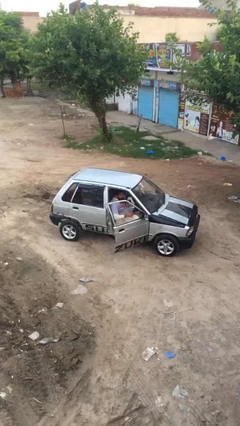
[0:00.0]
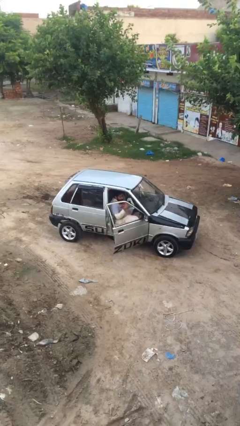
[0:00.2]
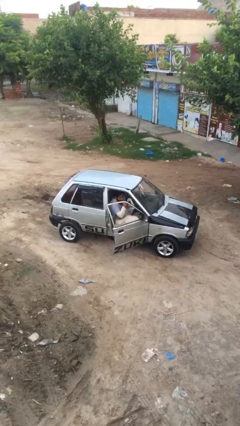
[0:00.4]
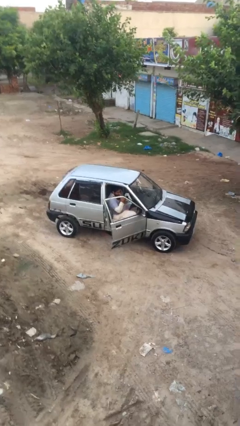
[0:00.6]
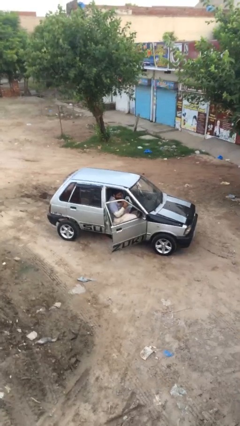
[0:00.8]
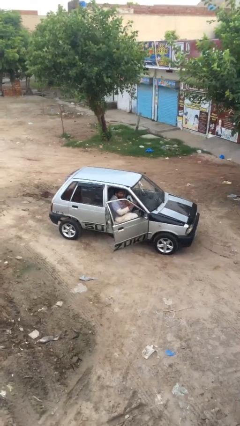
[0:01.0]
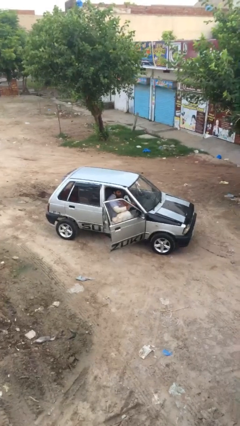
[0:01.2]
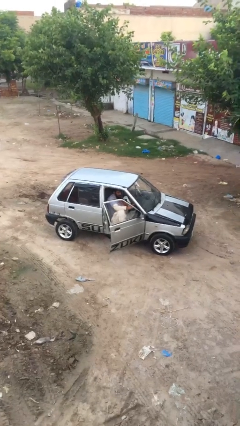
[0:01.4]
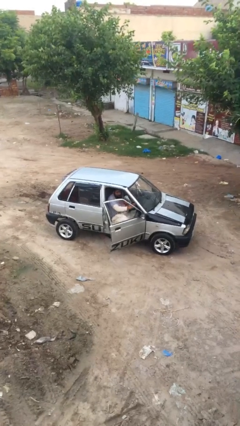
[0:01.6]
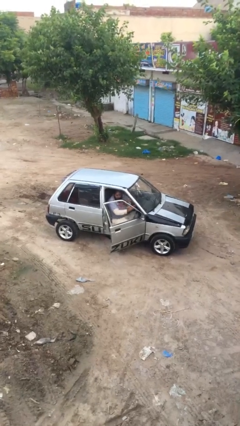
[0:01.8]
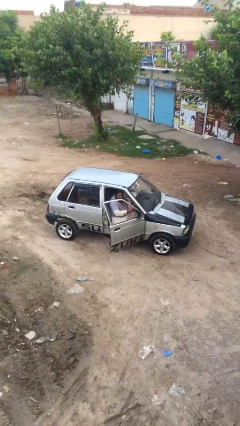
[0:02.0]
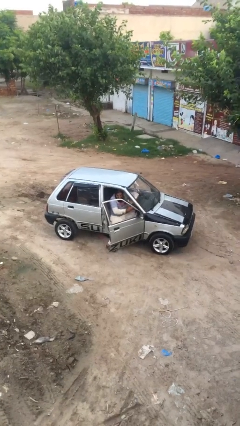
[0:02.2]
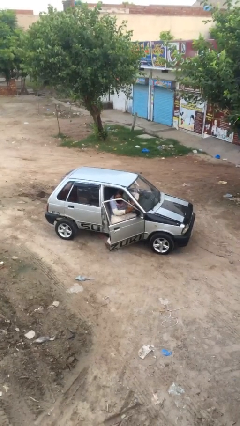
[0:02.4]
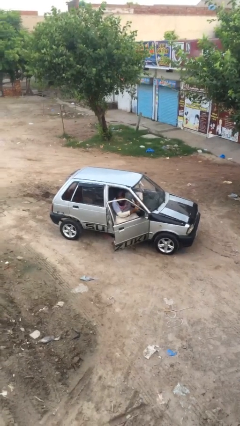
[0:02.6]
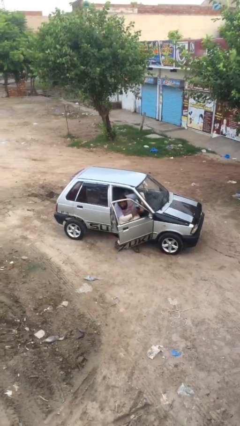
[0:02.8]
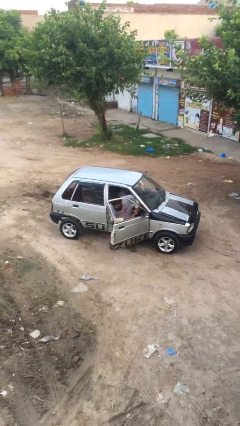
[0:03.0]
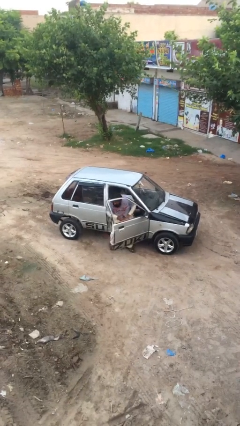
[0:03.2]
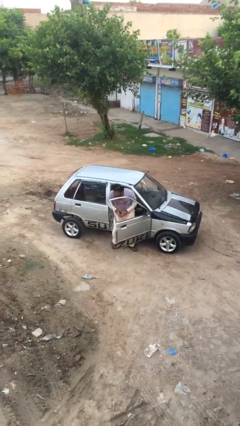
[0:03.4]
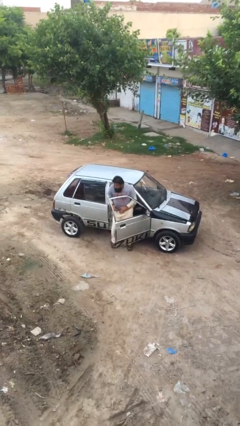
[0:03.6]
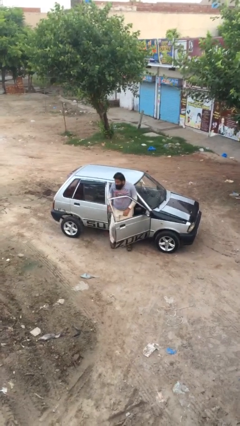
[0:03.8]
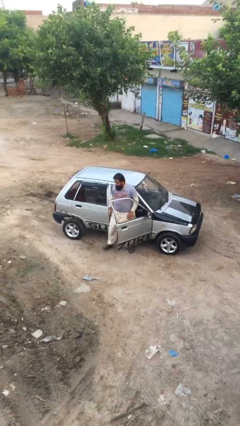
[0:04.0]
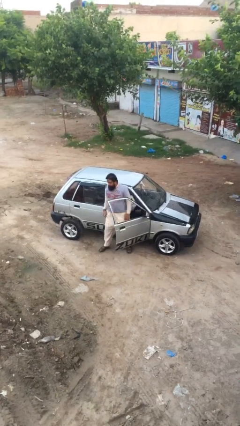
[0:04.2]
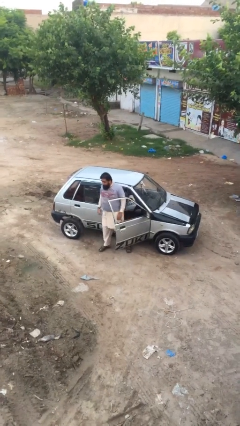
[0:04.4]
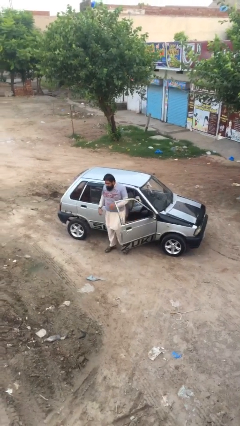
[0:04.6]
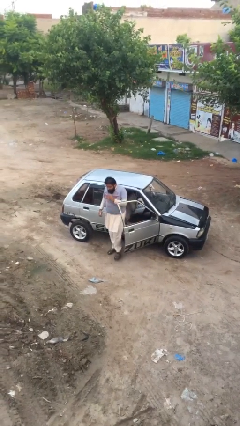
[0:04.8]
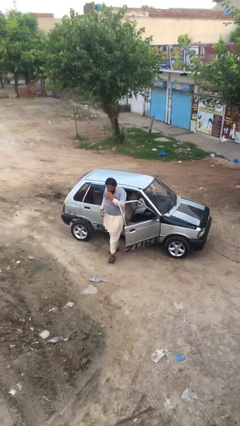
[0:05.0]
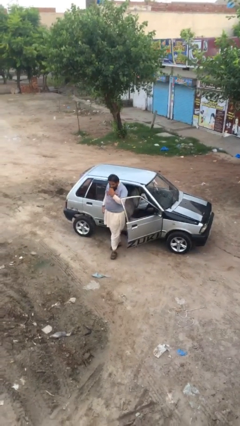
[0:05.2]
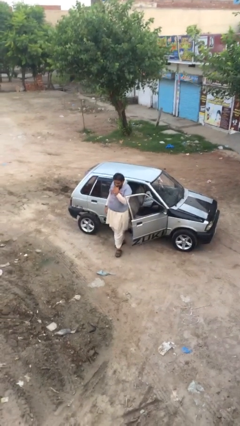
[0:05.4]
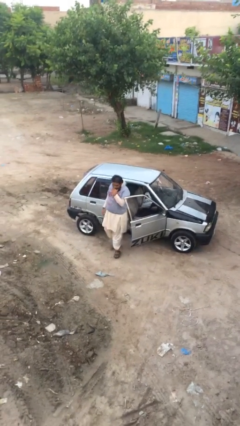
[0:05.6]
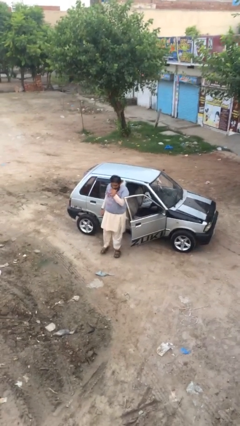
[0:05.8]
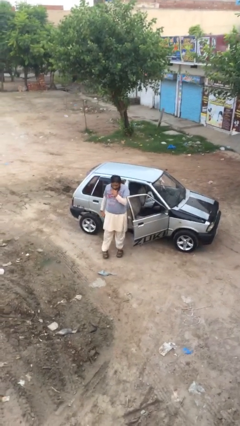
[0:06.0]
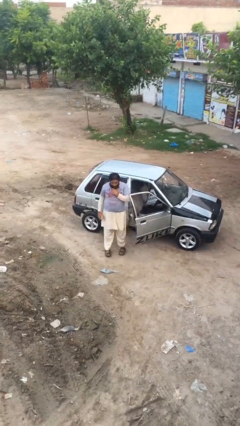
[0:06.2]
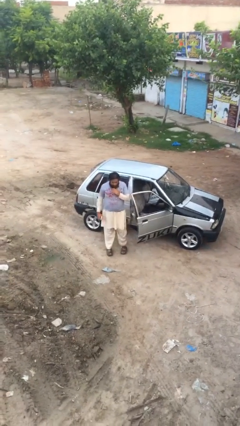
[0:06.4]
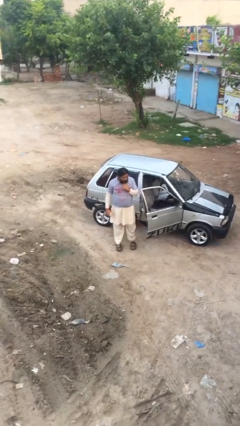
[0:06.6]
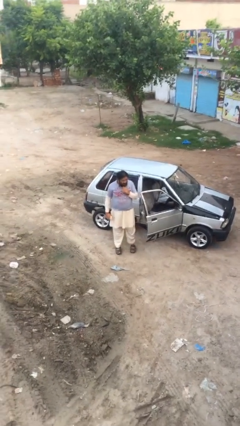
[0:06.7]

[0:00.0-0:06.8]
person exits car

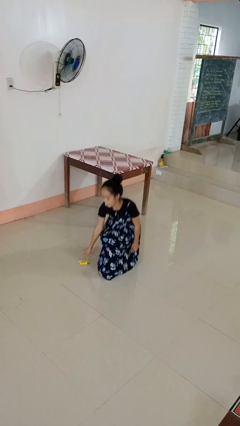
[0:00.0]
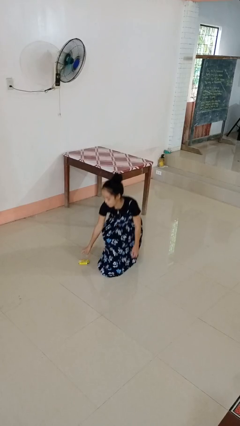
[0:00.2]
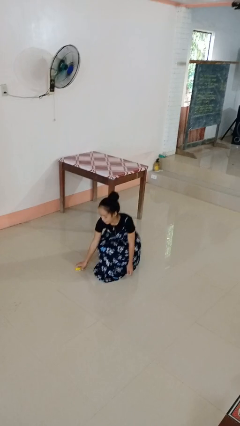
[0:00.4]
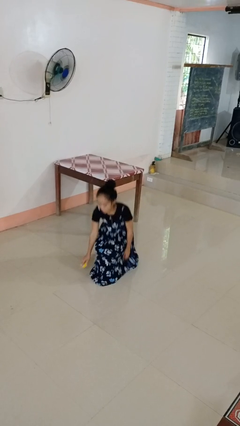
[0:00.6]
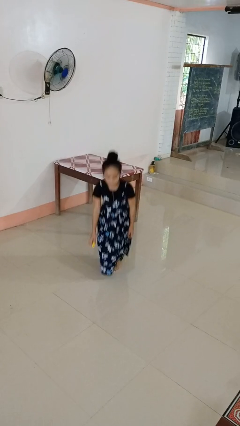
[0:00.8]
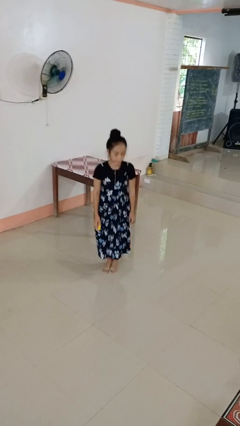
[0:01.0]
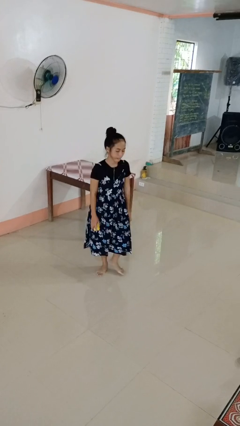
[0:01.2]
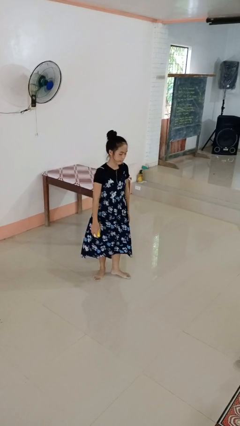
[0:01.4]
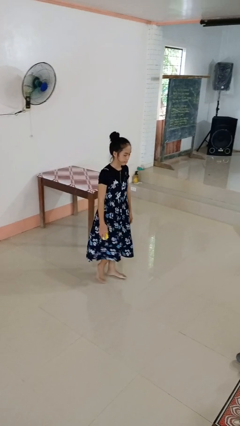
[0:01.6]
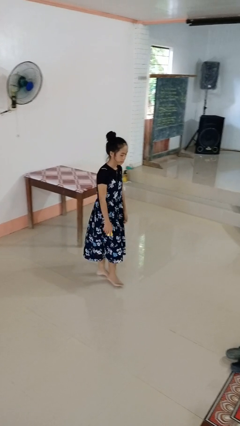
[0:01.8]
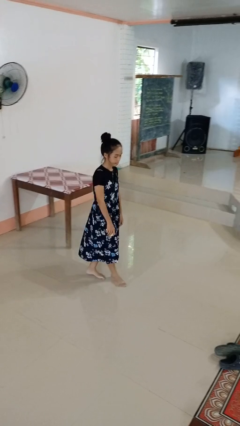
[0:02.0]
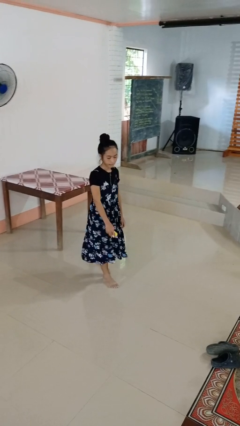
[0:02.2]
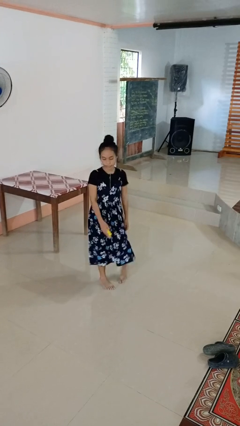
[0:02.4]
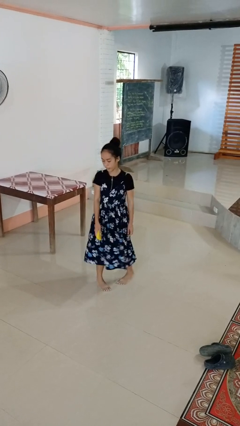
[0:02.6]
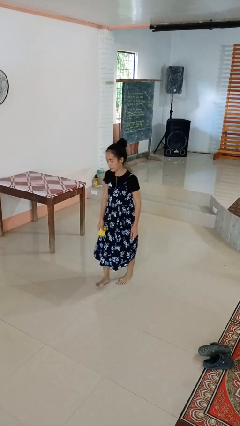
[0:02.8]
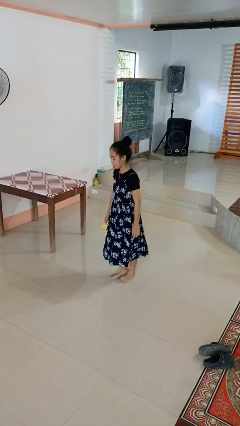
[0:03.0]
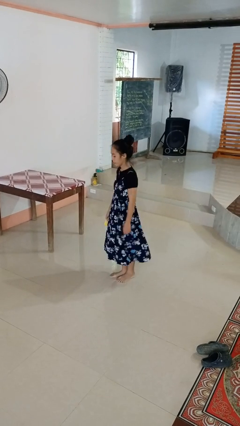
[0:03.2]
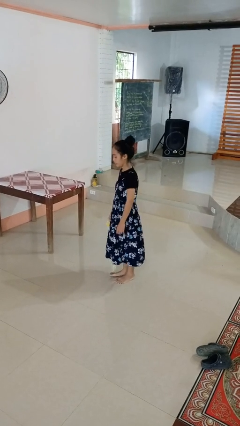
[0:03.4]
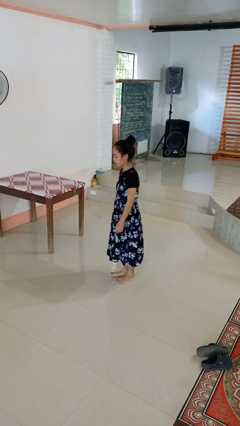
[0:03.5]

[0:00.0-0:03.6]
person picks up object from floor

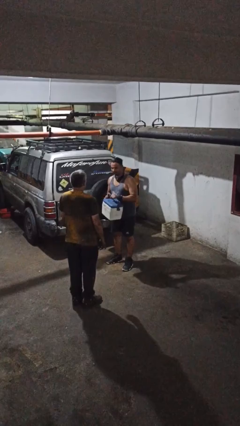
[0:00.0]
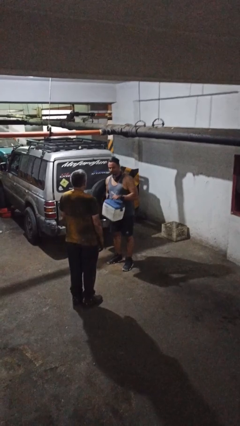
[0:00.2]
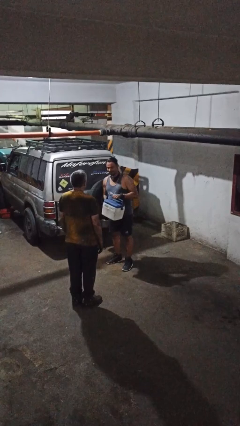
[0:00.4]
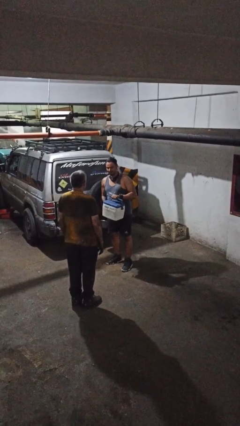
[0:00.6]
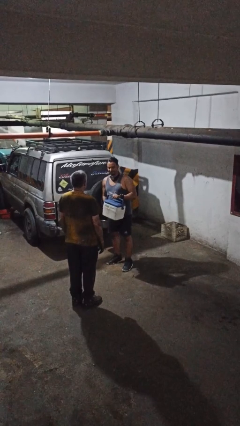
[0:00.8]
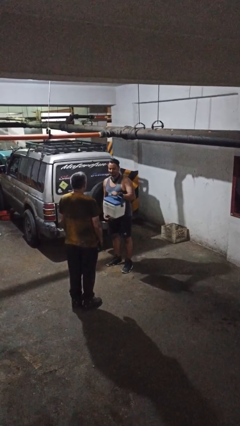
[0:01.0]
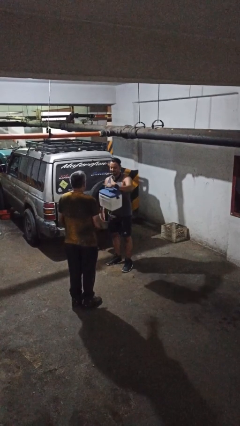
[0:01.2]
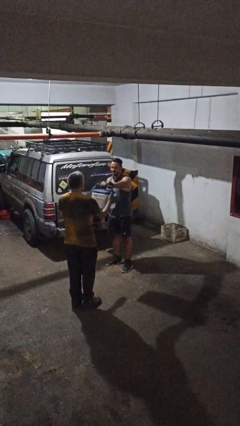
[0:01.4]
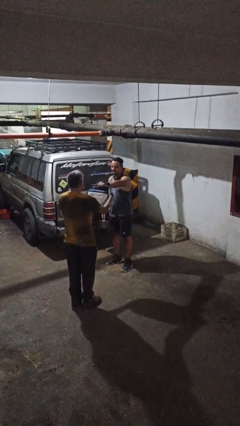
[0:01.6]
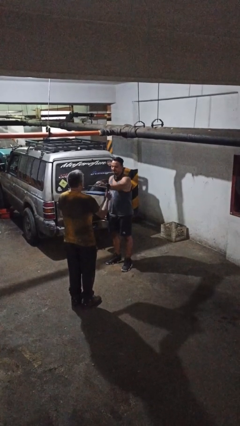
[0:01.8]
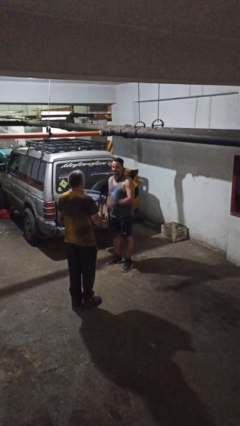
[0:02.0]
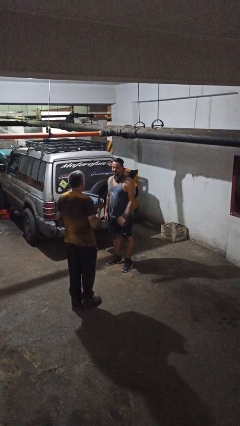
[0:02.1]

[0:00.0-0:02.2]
person transfers object to person

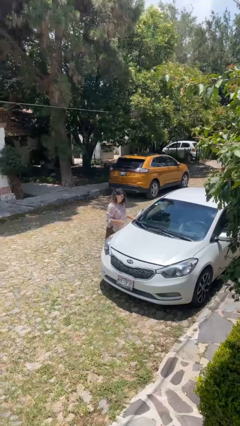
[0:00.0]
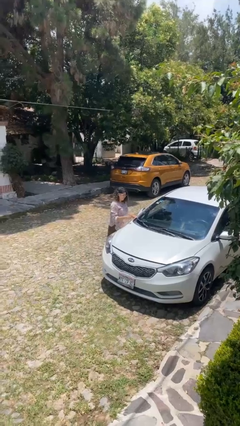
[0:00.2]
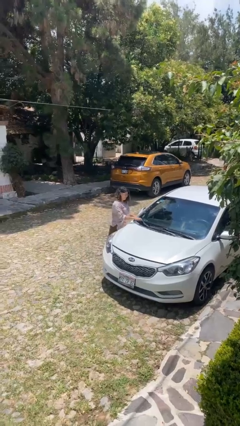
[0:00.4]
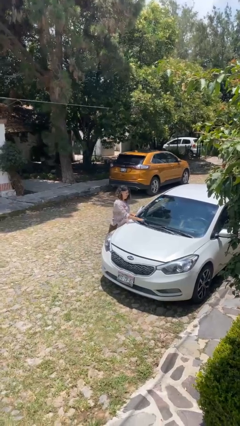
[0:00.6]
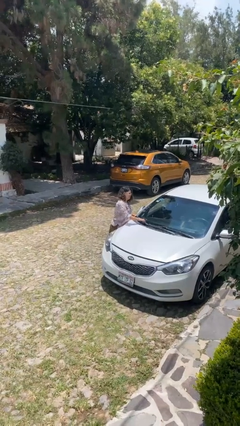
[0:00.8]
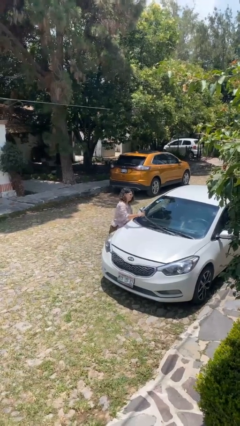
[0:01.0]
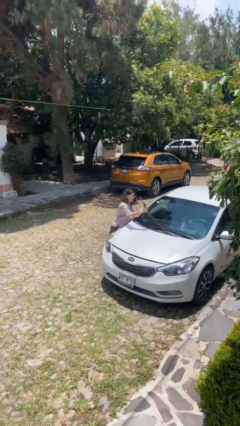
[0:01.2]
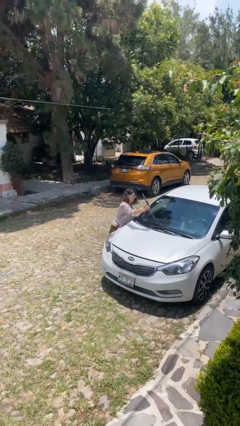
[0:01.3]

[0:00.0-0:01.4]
person flips up car wipers

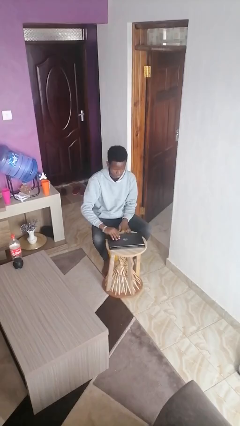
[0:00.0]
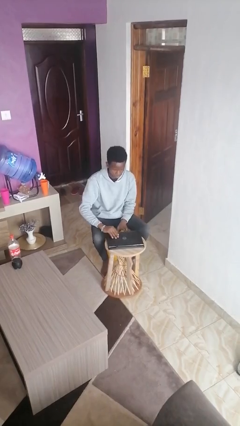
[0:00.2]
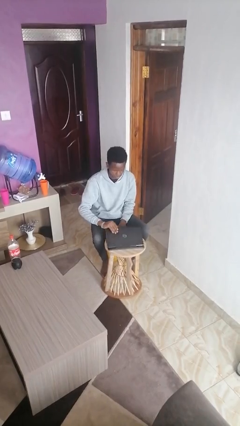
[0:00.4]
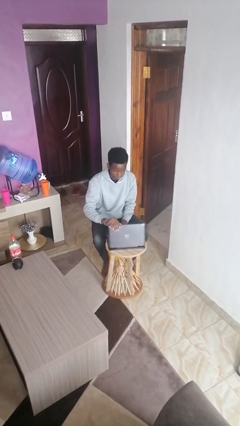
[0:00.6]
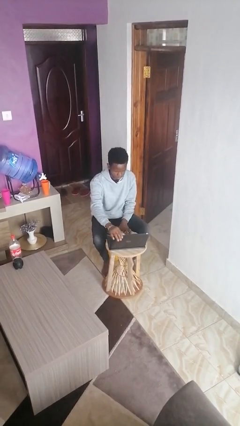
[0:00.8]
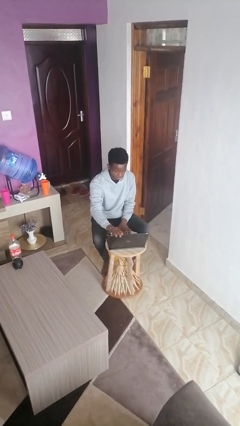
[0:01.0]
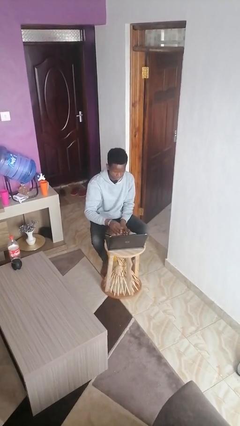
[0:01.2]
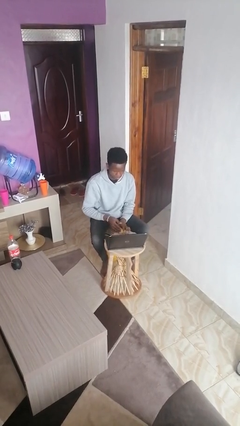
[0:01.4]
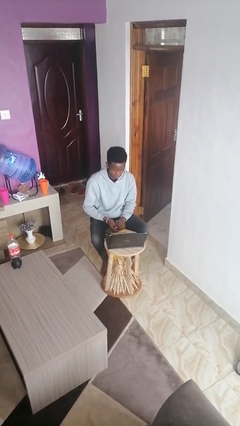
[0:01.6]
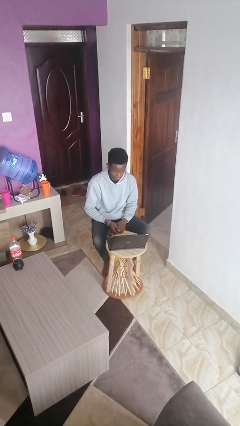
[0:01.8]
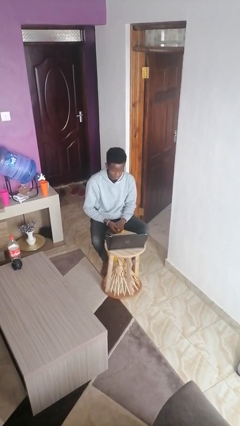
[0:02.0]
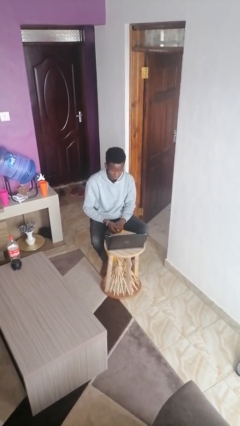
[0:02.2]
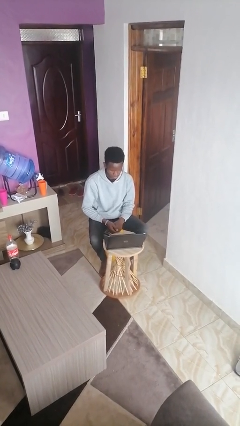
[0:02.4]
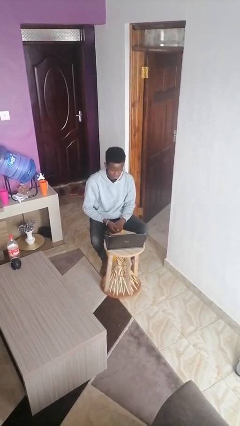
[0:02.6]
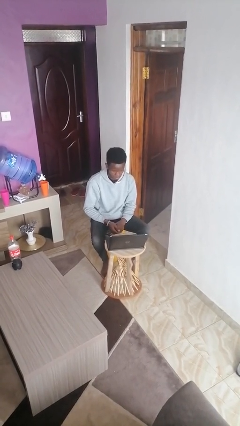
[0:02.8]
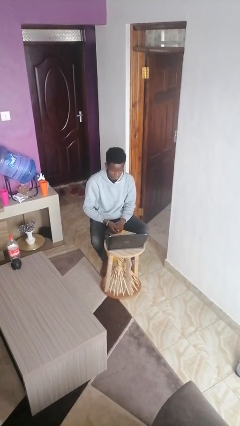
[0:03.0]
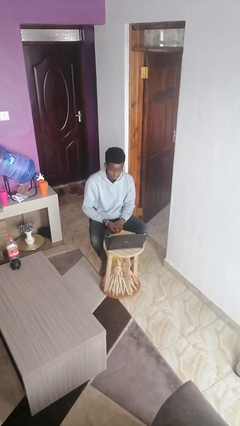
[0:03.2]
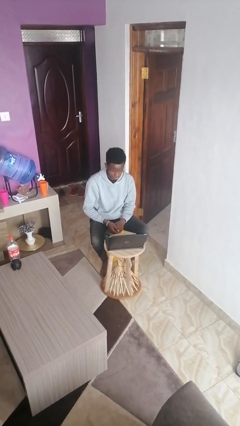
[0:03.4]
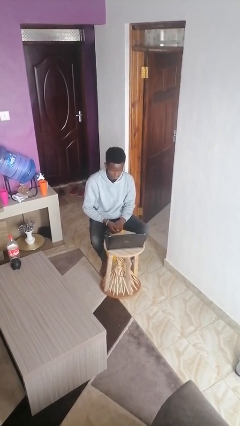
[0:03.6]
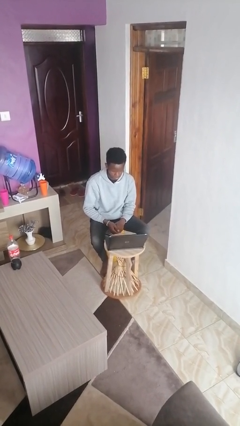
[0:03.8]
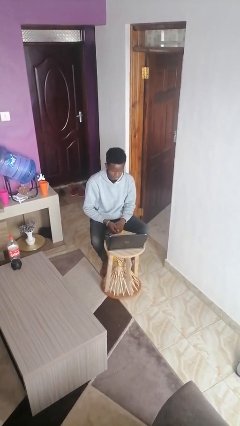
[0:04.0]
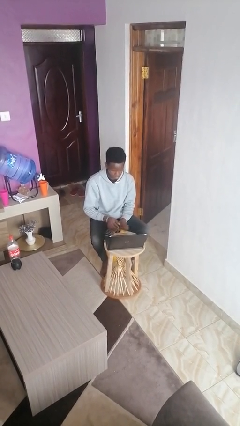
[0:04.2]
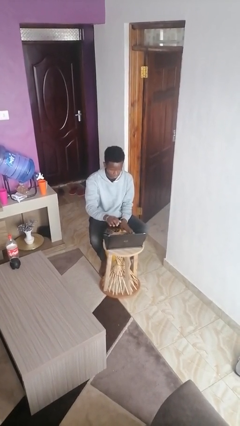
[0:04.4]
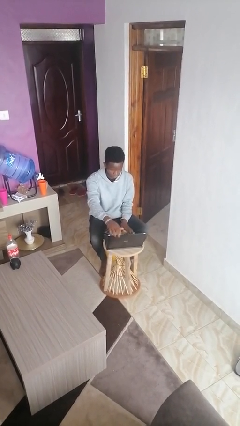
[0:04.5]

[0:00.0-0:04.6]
person opens laptop
